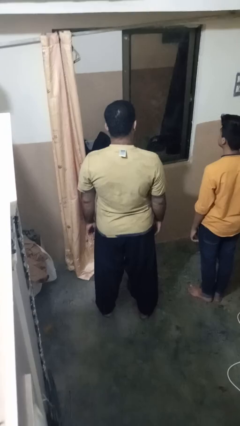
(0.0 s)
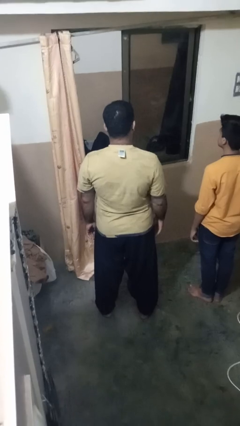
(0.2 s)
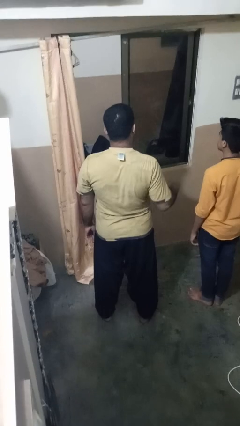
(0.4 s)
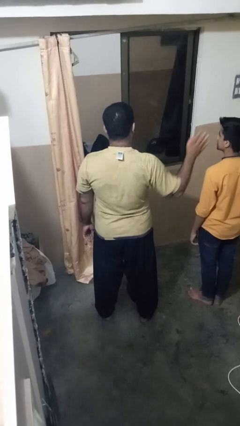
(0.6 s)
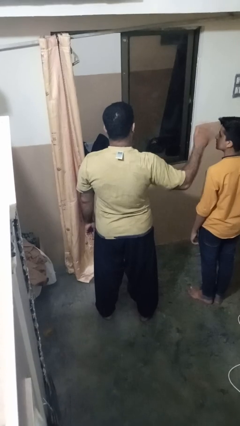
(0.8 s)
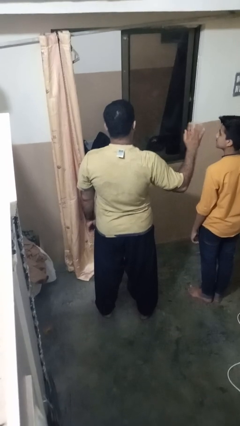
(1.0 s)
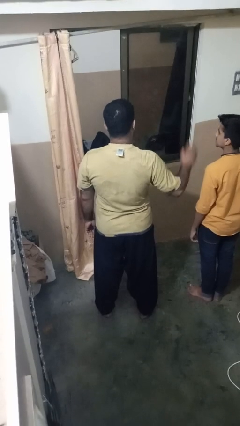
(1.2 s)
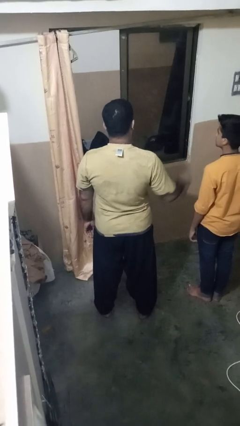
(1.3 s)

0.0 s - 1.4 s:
person waves at person

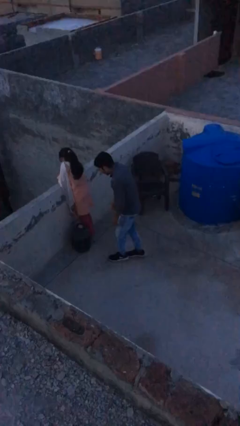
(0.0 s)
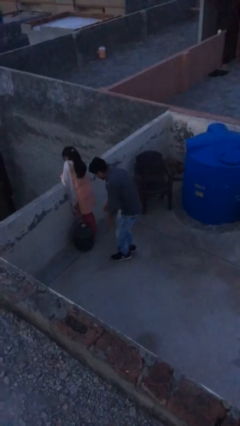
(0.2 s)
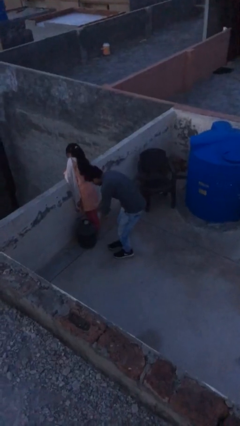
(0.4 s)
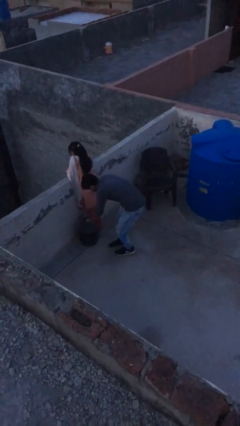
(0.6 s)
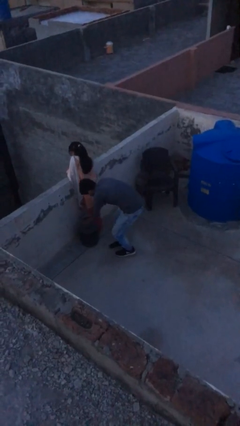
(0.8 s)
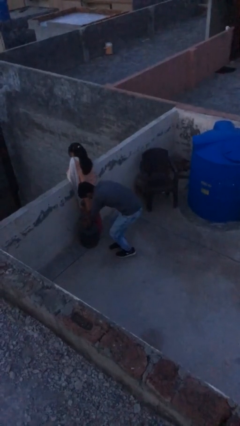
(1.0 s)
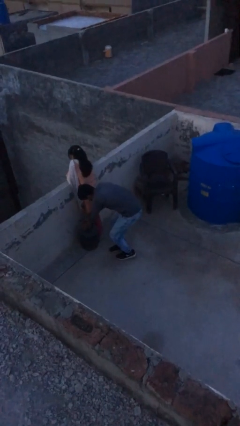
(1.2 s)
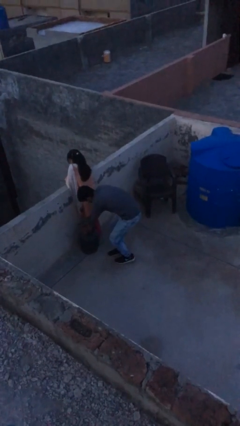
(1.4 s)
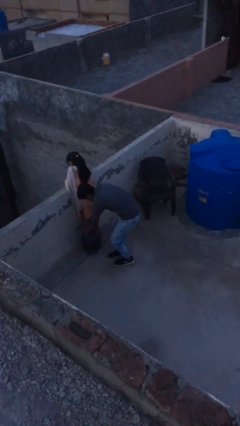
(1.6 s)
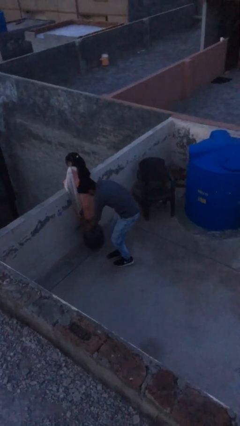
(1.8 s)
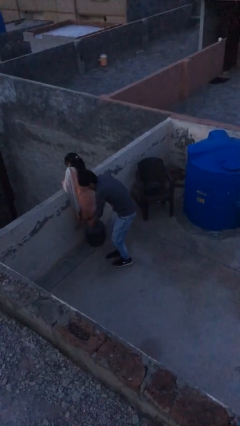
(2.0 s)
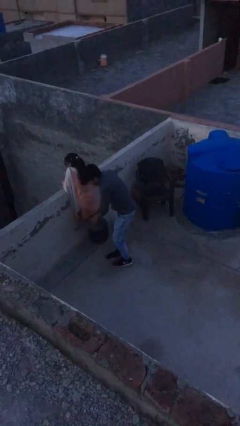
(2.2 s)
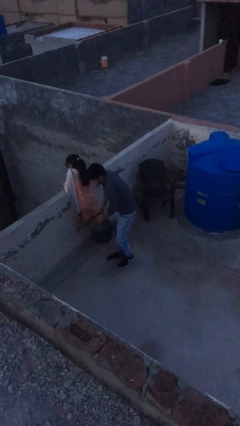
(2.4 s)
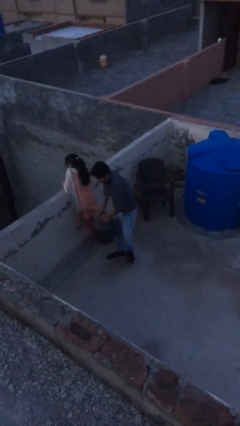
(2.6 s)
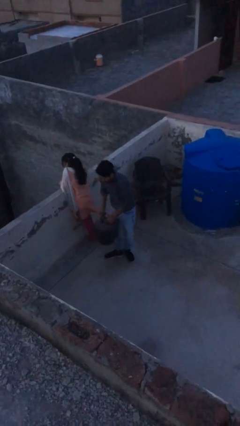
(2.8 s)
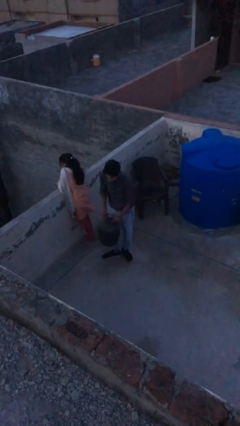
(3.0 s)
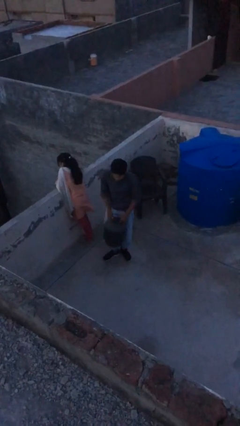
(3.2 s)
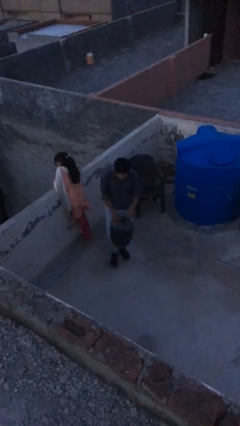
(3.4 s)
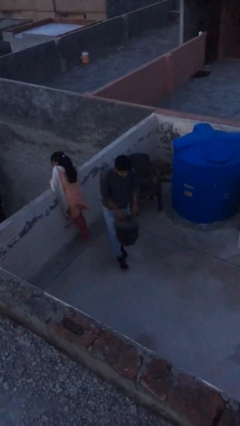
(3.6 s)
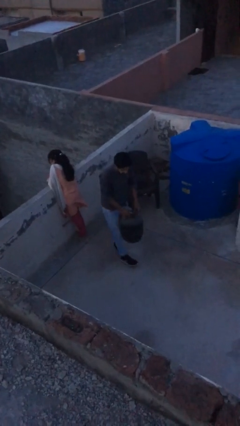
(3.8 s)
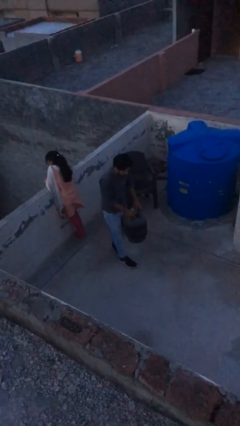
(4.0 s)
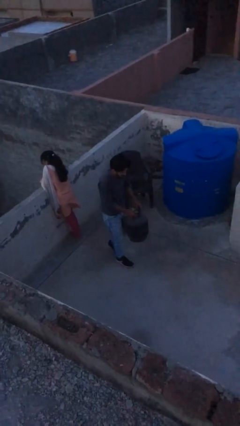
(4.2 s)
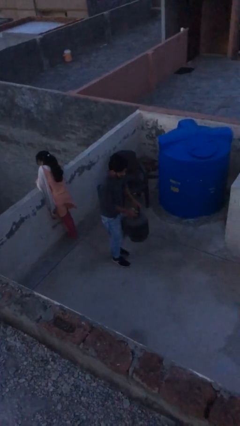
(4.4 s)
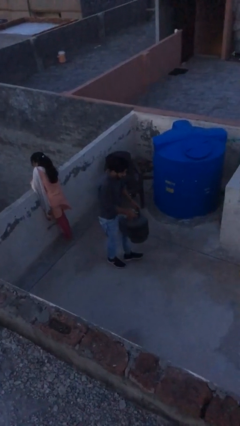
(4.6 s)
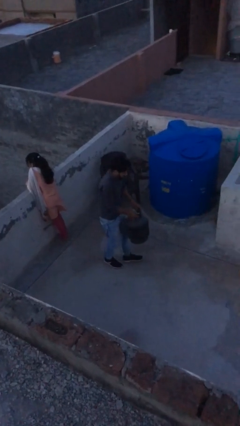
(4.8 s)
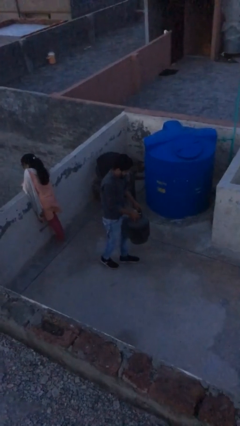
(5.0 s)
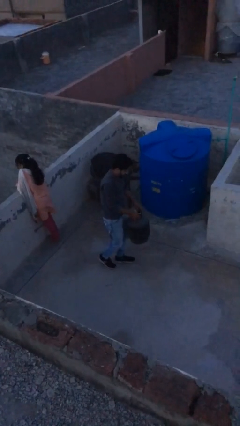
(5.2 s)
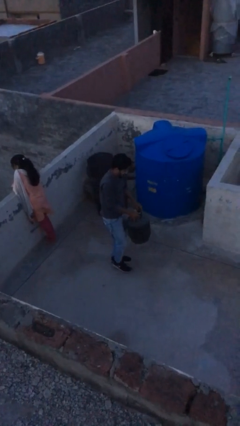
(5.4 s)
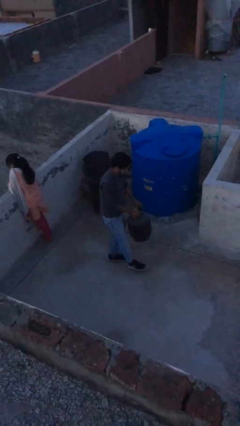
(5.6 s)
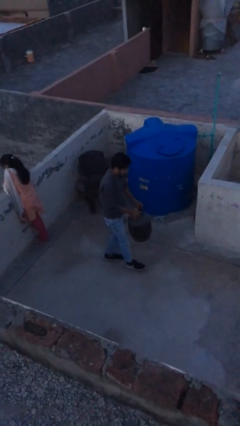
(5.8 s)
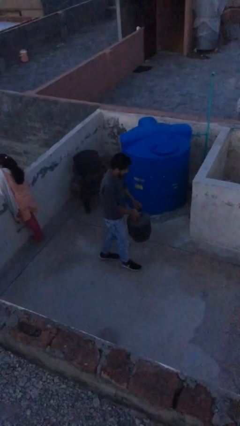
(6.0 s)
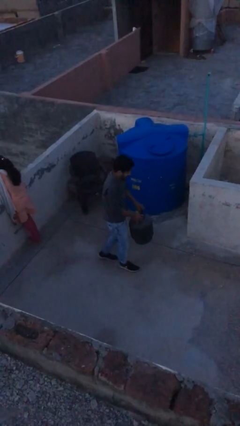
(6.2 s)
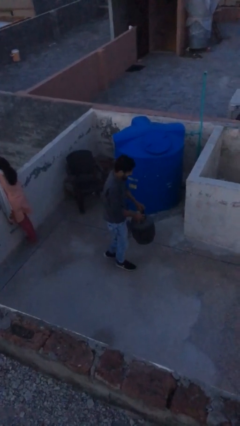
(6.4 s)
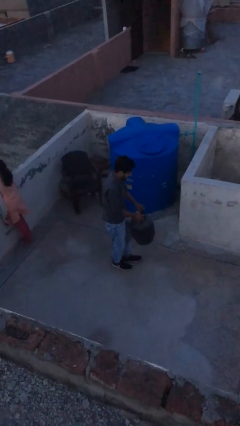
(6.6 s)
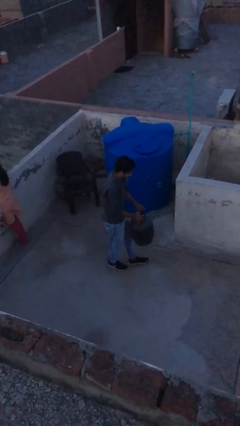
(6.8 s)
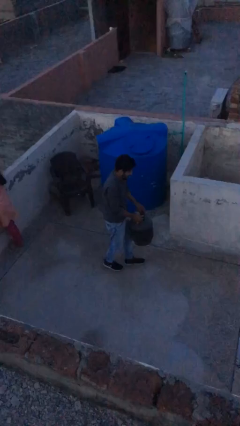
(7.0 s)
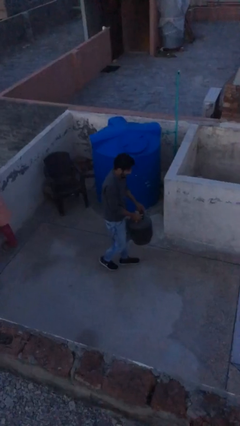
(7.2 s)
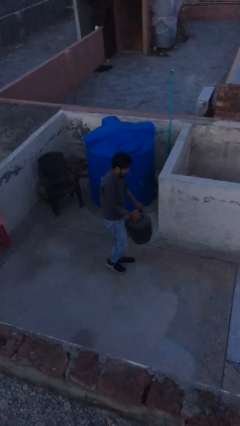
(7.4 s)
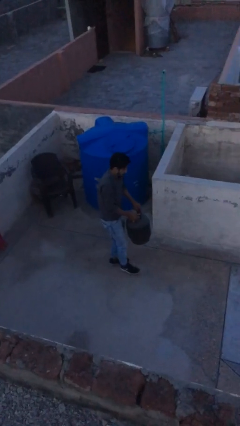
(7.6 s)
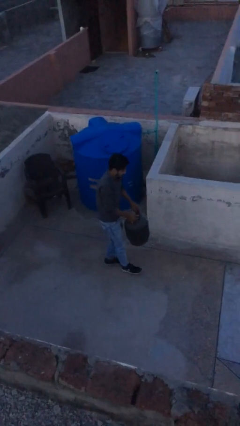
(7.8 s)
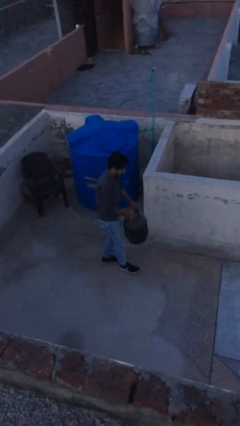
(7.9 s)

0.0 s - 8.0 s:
person steals object from person

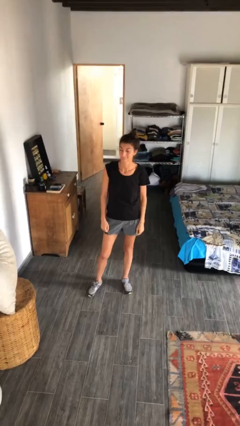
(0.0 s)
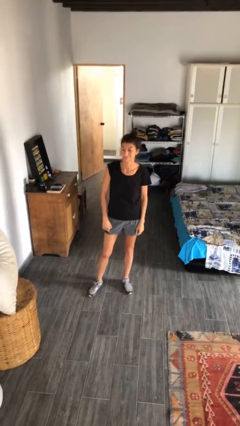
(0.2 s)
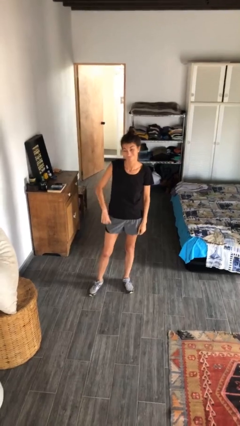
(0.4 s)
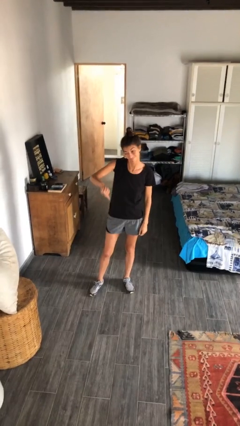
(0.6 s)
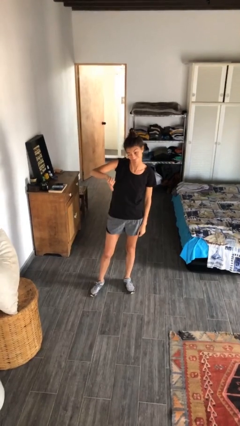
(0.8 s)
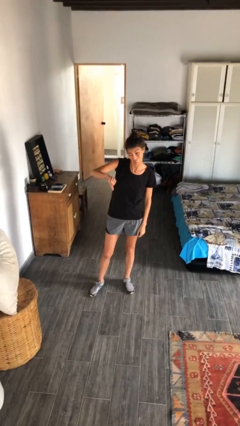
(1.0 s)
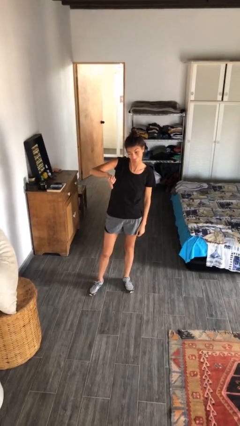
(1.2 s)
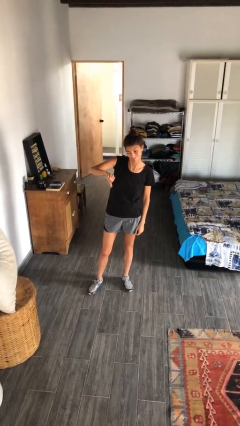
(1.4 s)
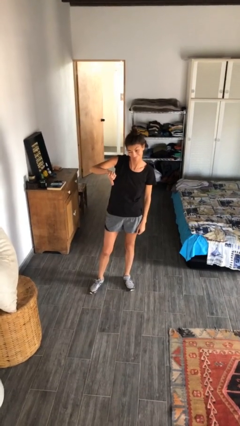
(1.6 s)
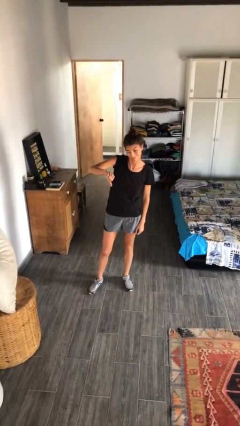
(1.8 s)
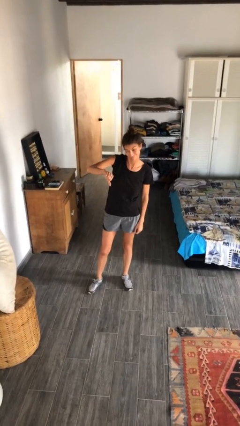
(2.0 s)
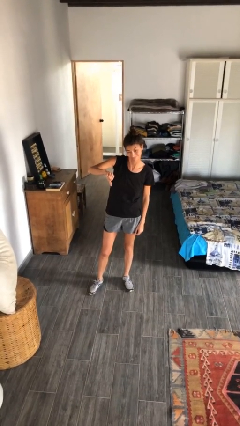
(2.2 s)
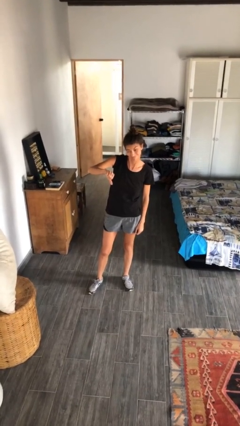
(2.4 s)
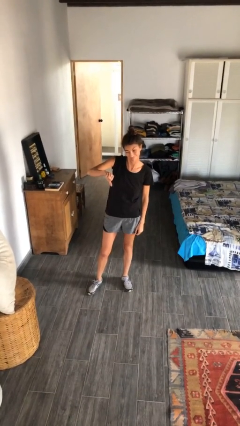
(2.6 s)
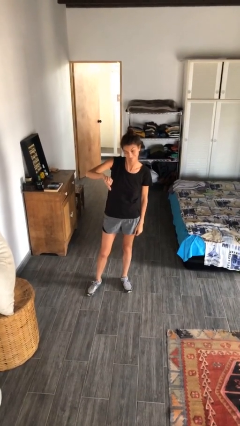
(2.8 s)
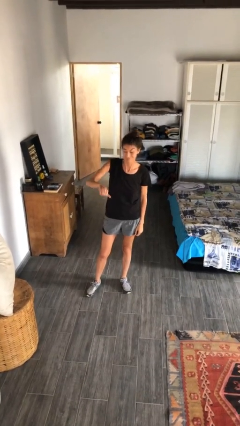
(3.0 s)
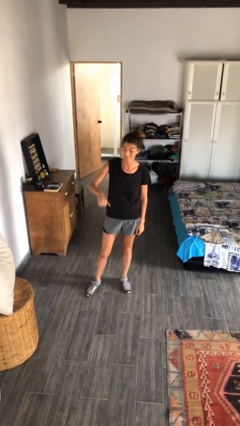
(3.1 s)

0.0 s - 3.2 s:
person gestures thumbs down

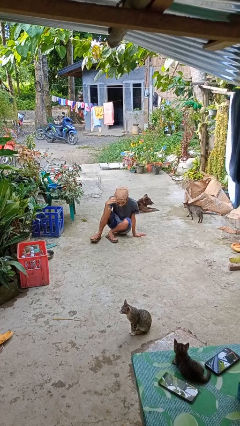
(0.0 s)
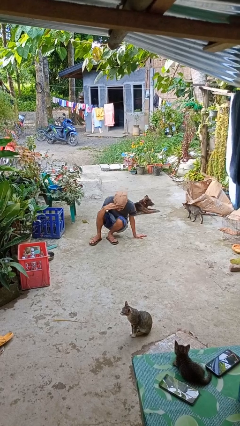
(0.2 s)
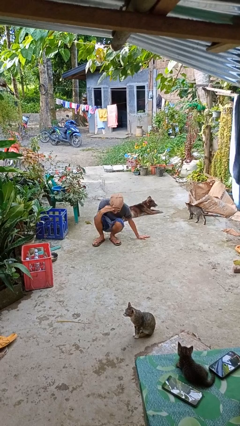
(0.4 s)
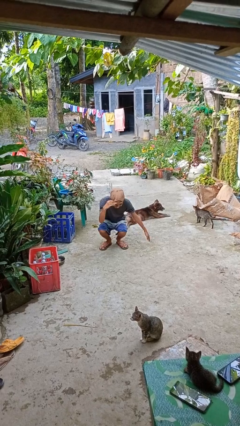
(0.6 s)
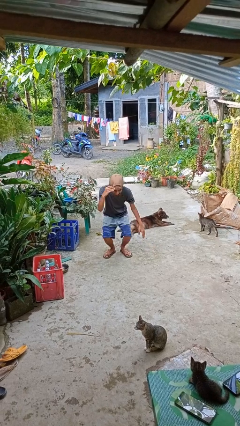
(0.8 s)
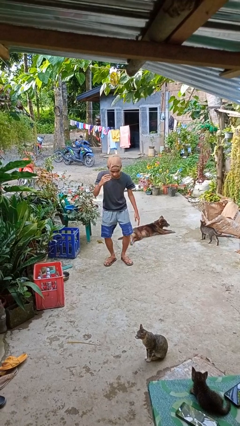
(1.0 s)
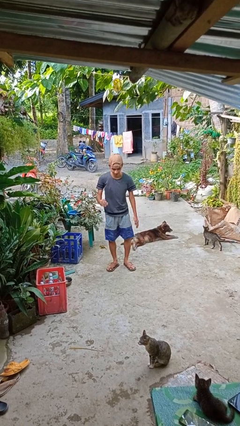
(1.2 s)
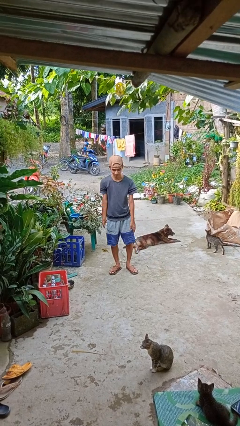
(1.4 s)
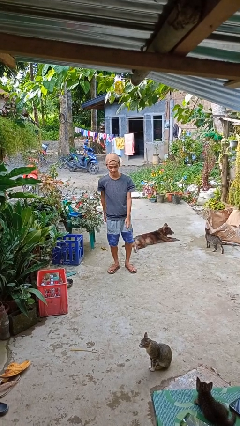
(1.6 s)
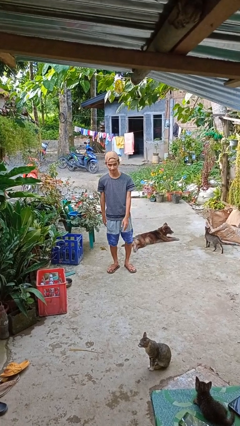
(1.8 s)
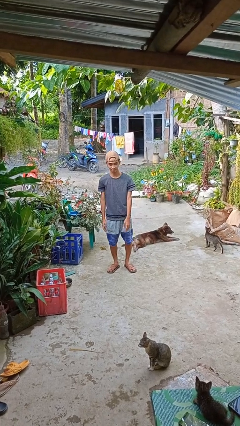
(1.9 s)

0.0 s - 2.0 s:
person stands up from floor

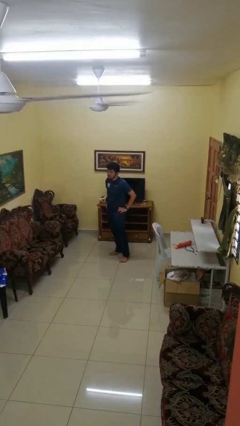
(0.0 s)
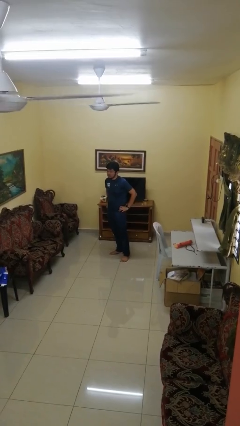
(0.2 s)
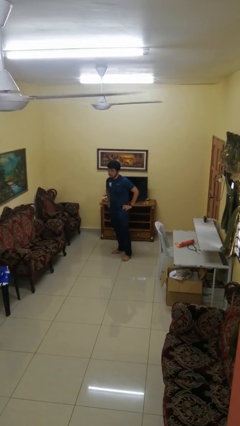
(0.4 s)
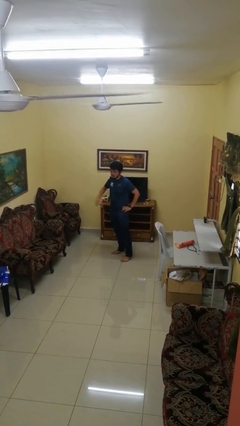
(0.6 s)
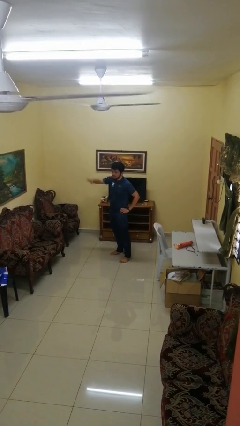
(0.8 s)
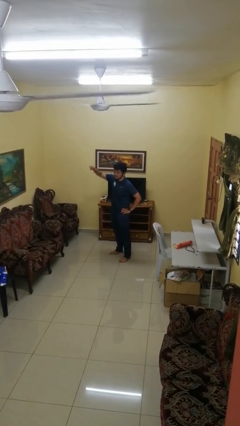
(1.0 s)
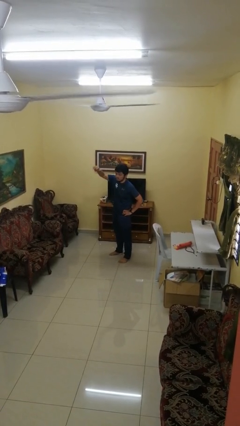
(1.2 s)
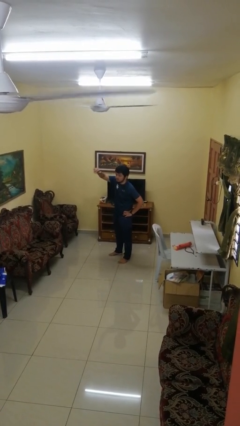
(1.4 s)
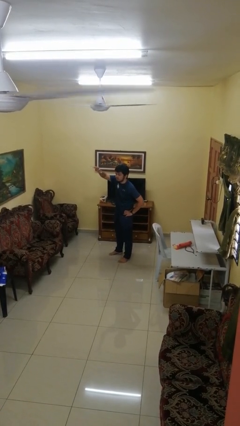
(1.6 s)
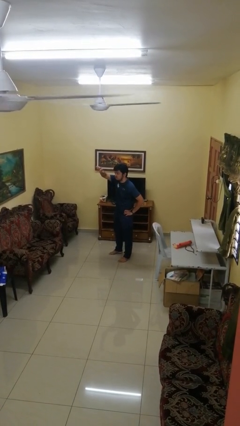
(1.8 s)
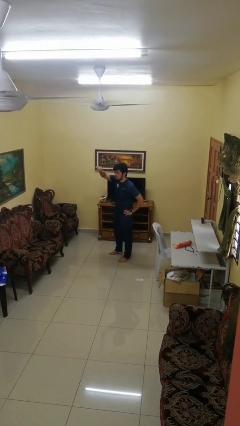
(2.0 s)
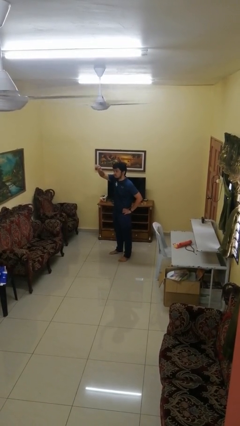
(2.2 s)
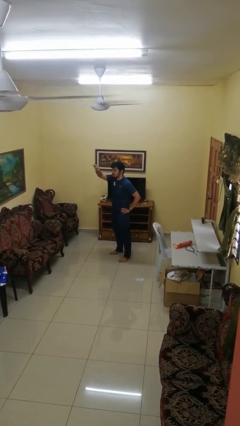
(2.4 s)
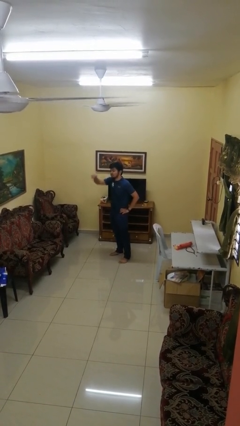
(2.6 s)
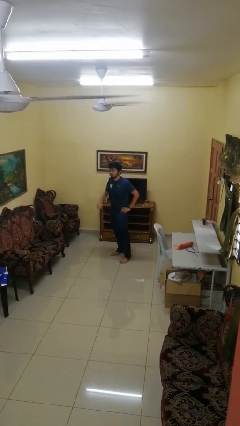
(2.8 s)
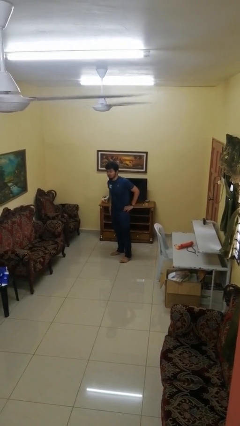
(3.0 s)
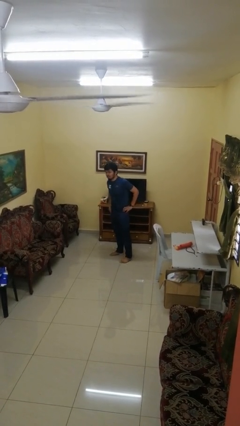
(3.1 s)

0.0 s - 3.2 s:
person gestures come here
